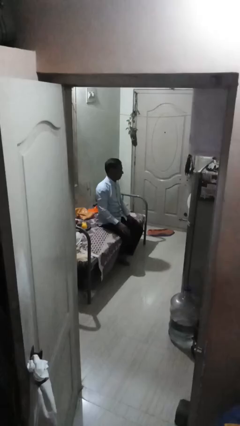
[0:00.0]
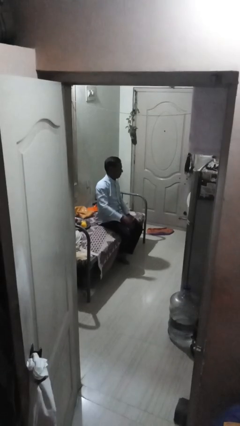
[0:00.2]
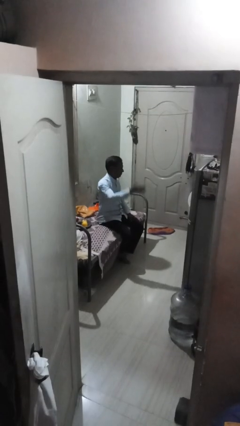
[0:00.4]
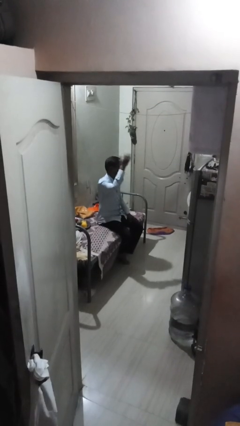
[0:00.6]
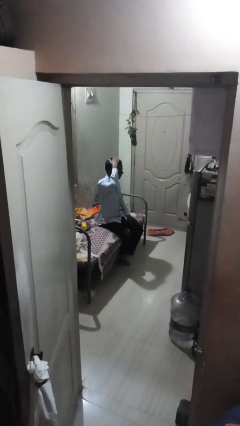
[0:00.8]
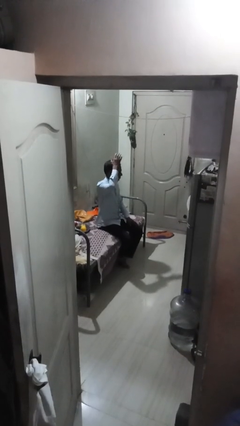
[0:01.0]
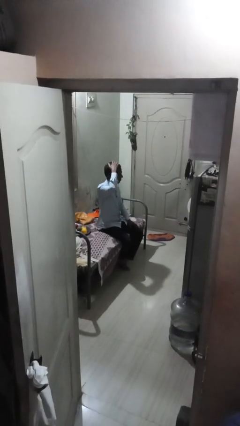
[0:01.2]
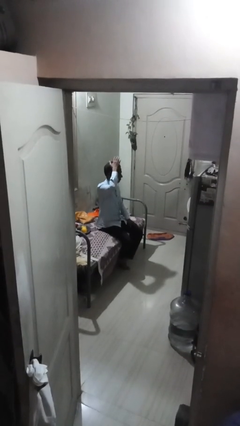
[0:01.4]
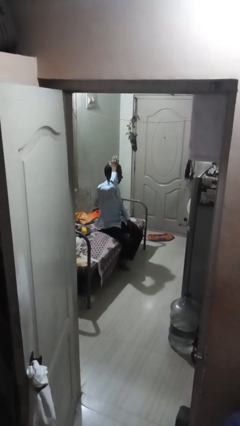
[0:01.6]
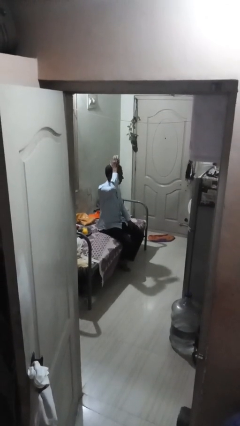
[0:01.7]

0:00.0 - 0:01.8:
person pats head

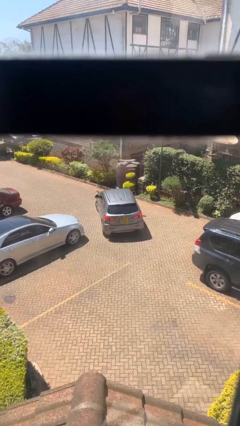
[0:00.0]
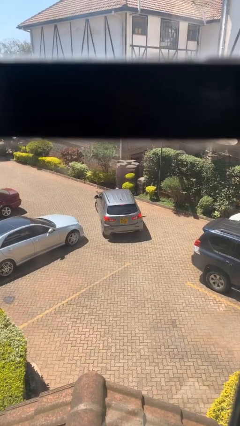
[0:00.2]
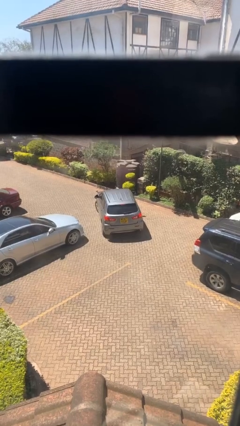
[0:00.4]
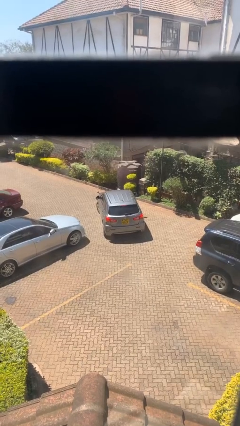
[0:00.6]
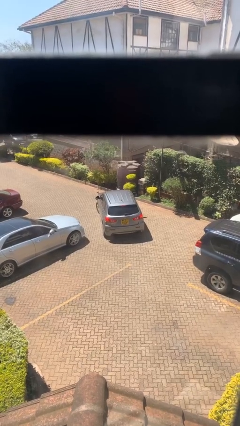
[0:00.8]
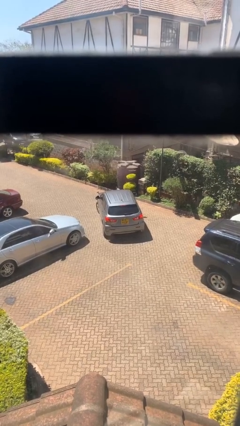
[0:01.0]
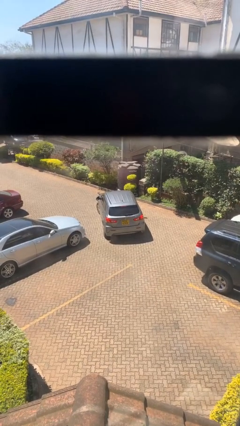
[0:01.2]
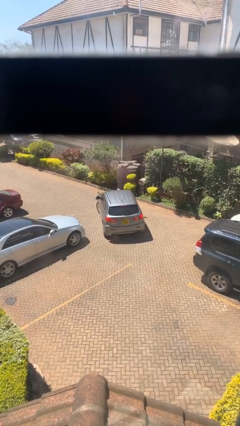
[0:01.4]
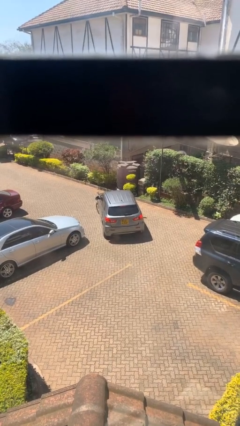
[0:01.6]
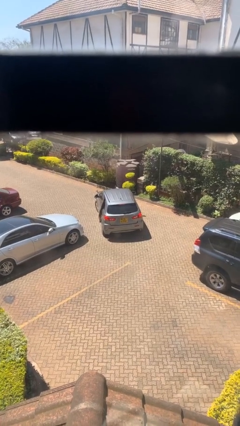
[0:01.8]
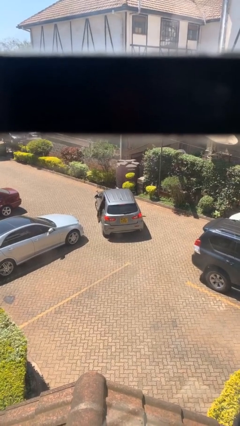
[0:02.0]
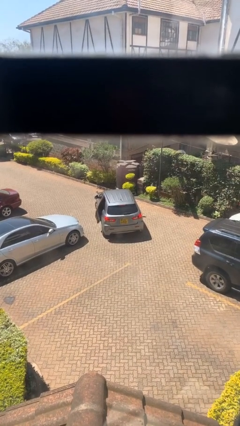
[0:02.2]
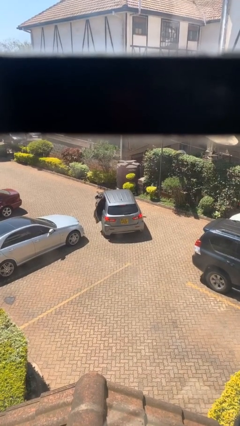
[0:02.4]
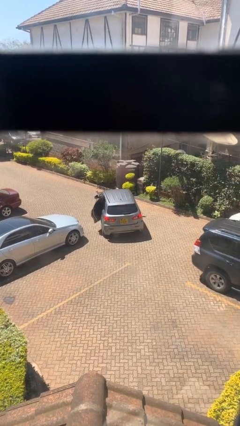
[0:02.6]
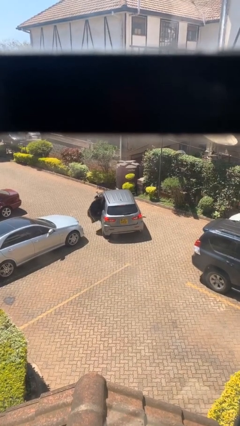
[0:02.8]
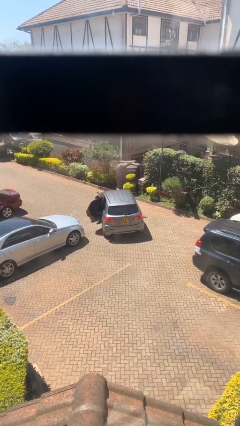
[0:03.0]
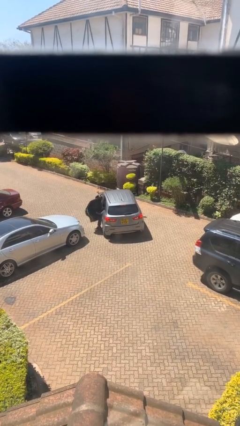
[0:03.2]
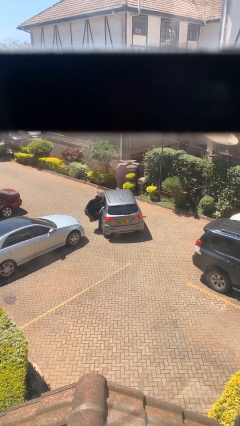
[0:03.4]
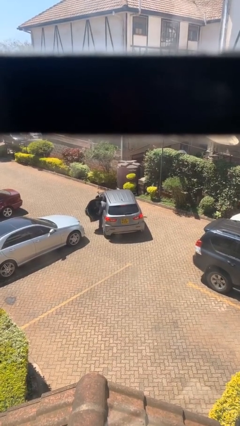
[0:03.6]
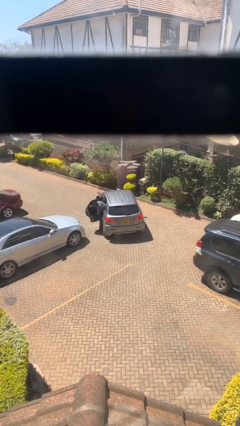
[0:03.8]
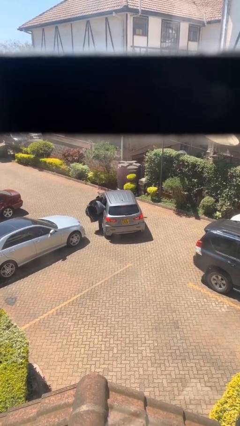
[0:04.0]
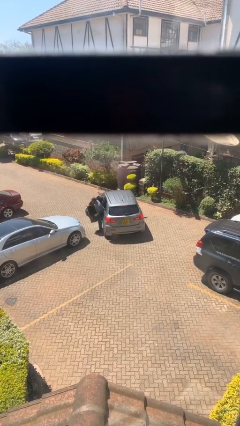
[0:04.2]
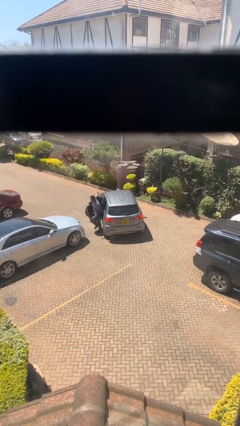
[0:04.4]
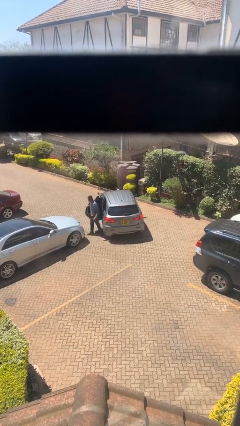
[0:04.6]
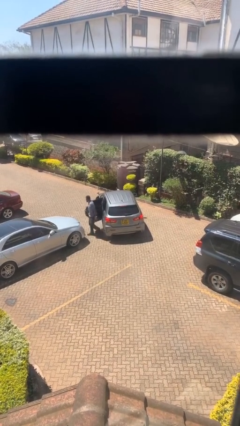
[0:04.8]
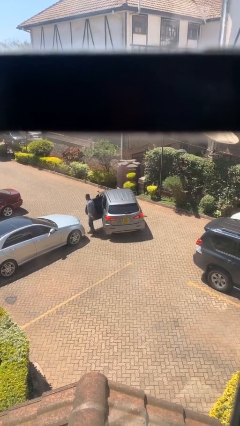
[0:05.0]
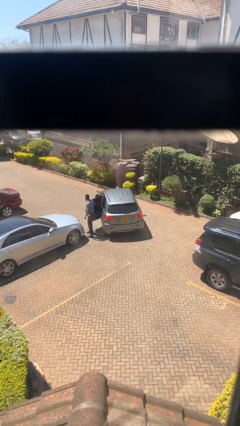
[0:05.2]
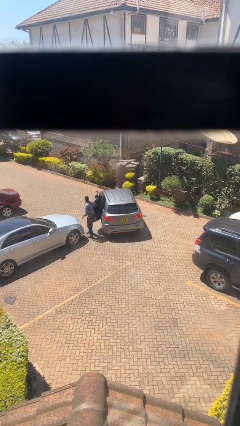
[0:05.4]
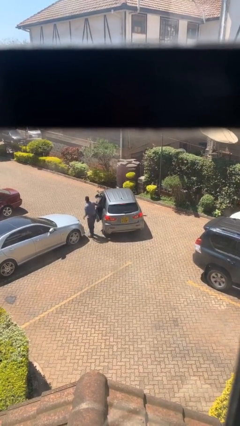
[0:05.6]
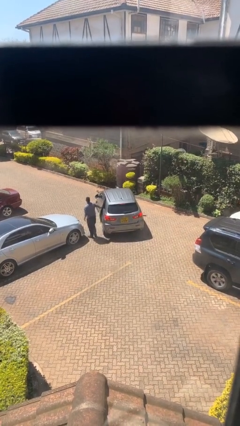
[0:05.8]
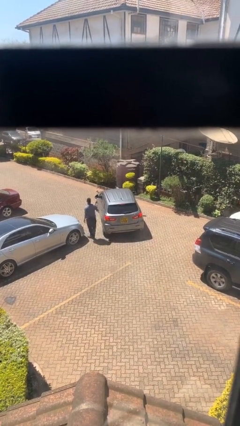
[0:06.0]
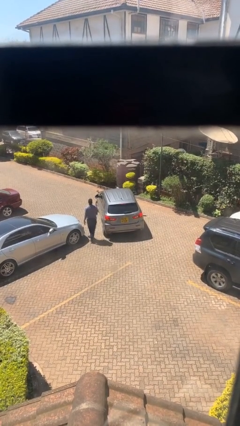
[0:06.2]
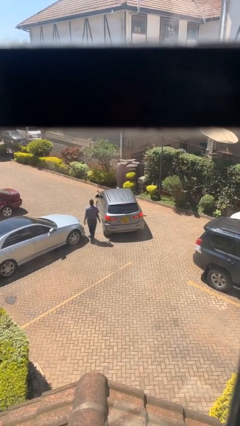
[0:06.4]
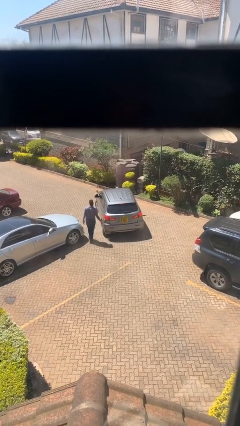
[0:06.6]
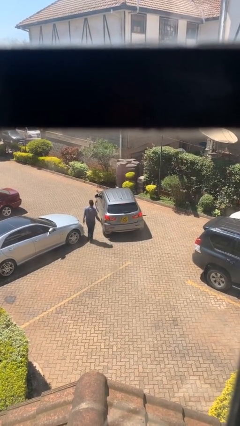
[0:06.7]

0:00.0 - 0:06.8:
car drops off person

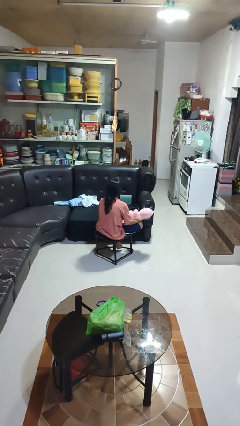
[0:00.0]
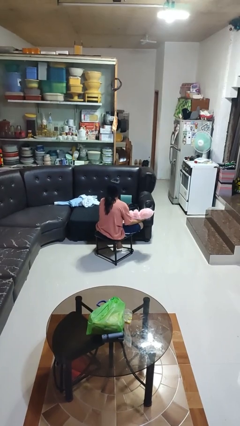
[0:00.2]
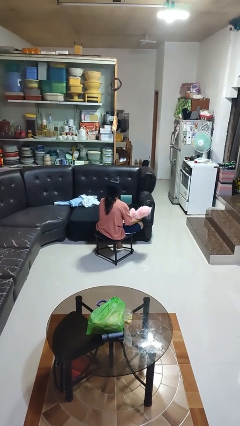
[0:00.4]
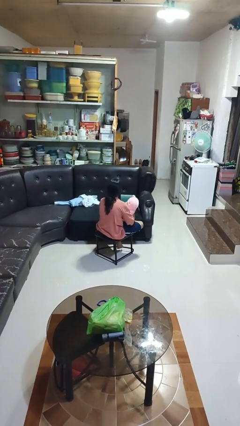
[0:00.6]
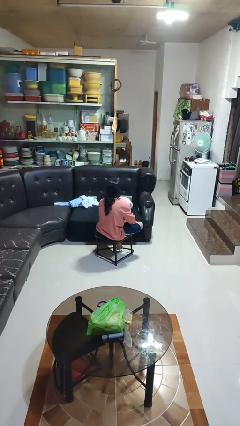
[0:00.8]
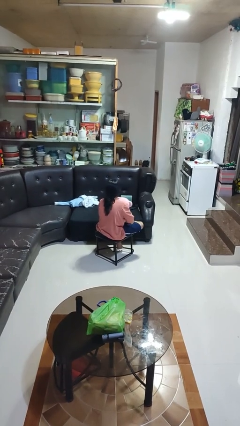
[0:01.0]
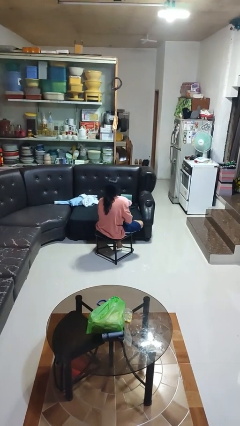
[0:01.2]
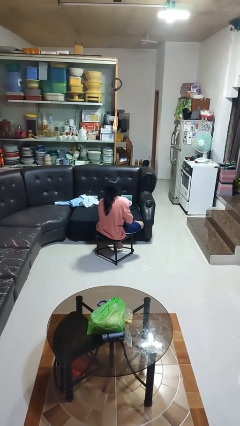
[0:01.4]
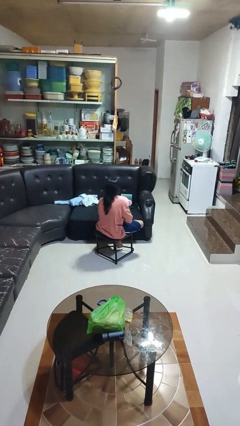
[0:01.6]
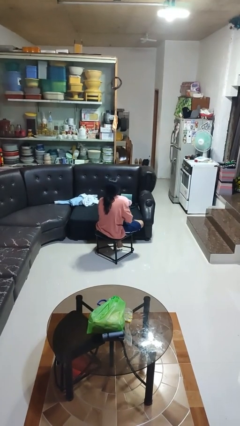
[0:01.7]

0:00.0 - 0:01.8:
person hugs stuffed animal

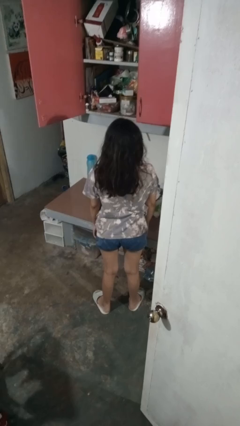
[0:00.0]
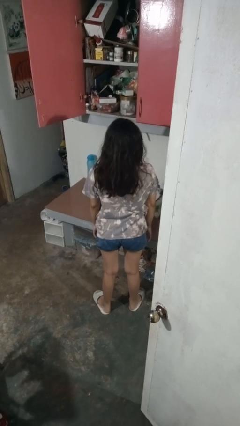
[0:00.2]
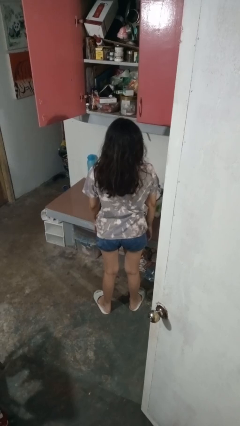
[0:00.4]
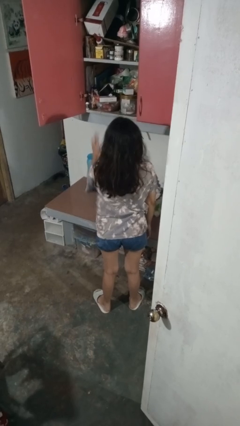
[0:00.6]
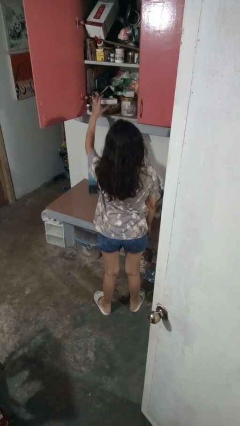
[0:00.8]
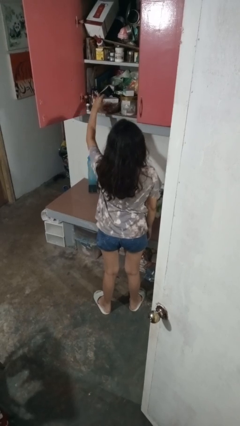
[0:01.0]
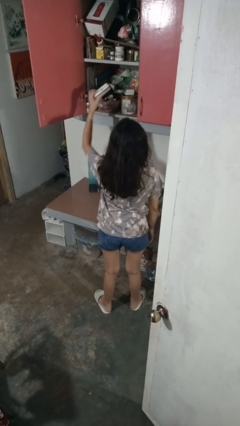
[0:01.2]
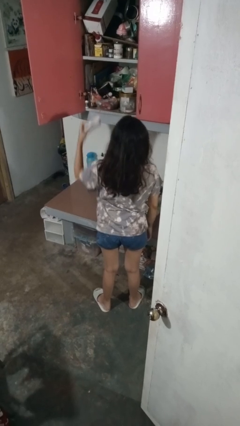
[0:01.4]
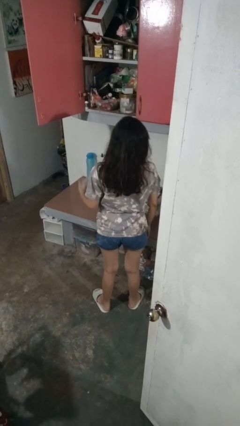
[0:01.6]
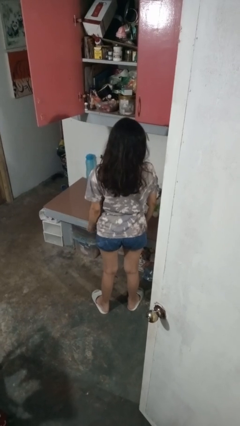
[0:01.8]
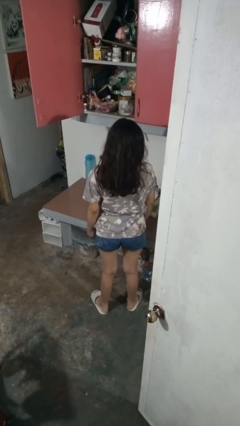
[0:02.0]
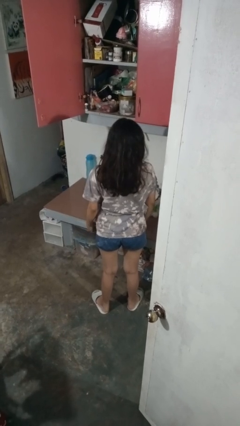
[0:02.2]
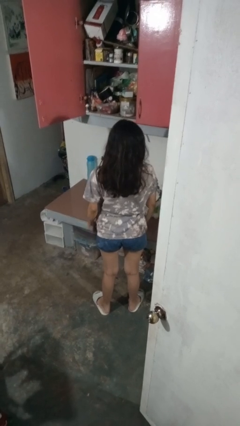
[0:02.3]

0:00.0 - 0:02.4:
person takes object from cabinet

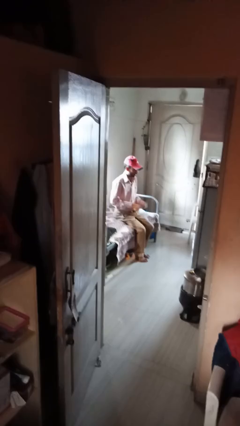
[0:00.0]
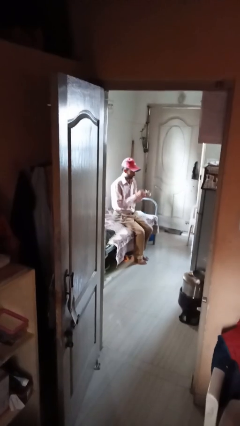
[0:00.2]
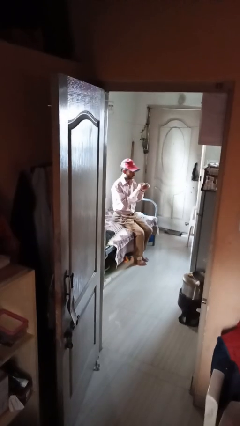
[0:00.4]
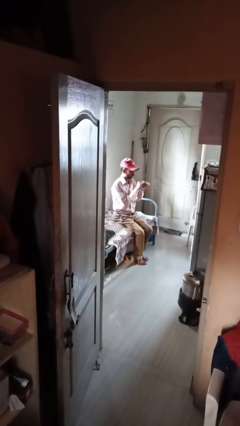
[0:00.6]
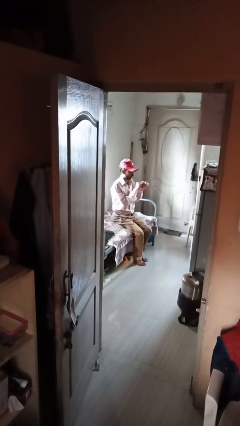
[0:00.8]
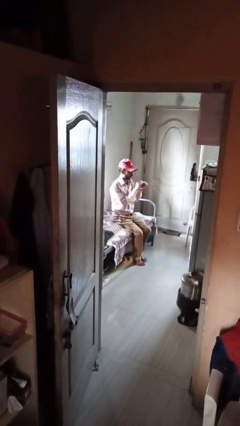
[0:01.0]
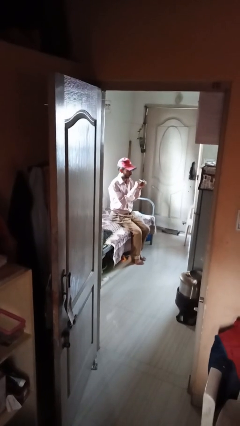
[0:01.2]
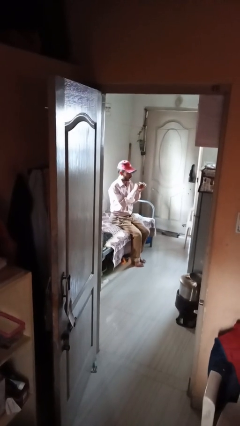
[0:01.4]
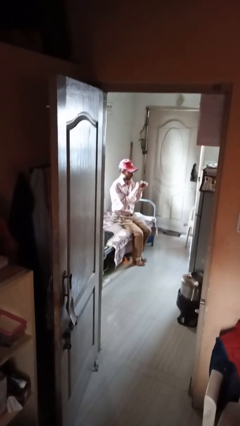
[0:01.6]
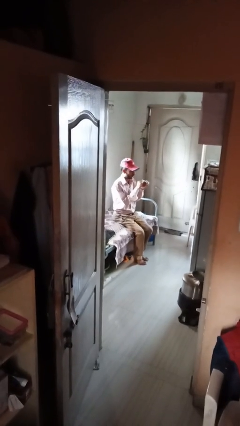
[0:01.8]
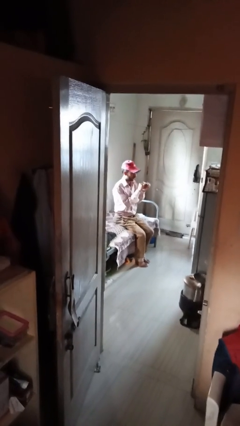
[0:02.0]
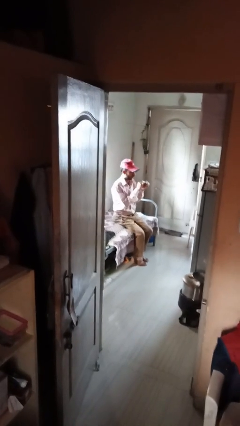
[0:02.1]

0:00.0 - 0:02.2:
person files fingernails

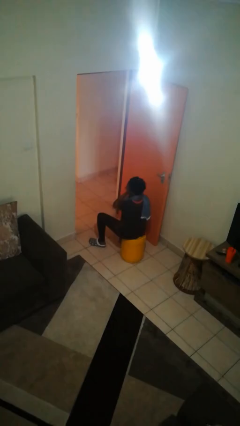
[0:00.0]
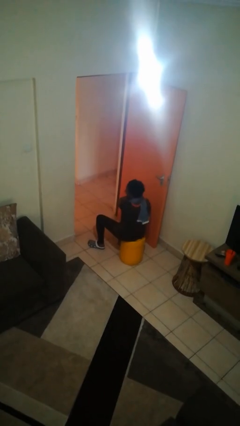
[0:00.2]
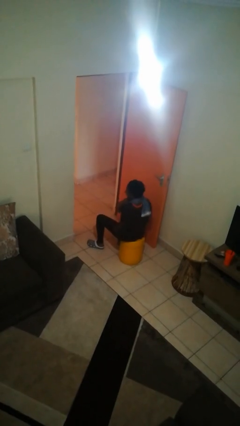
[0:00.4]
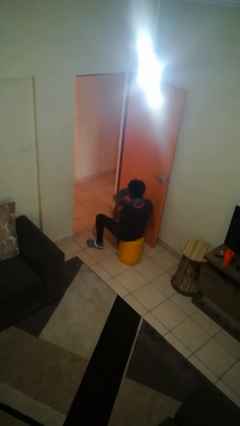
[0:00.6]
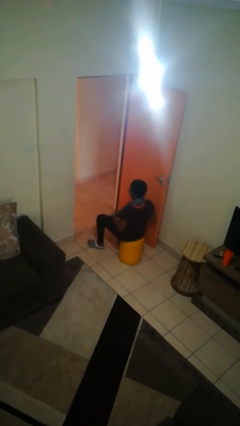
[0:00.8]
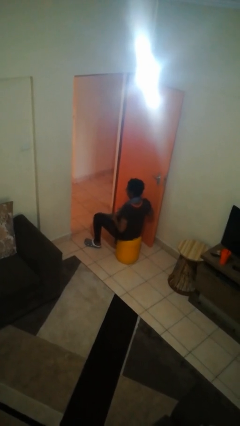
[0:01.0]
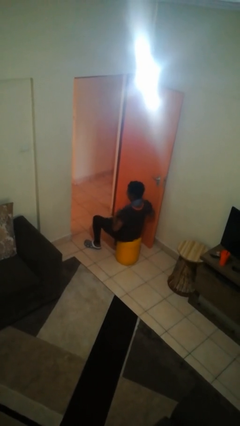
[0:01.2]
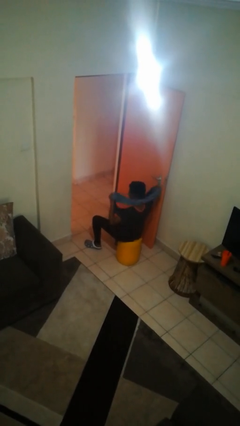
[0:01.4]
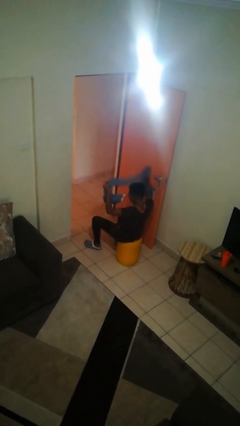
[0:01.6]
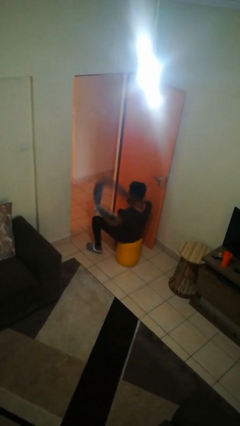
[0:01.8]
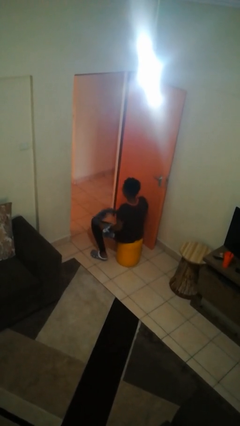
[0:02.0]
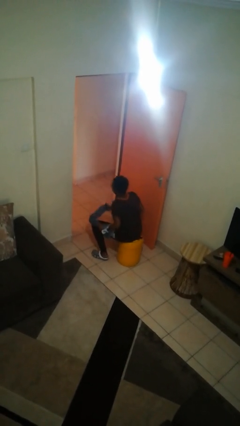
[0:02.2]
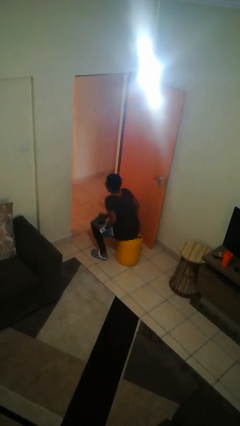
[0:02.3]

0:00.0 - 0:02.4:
person takes off scarf
